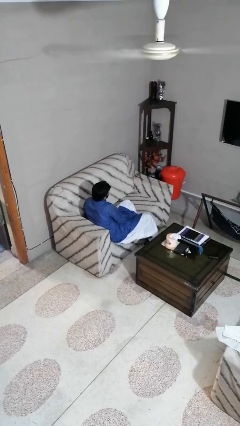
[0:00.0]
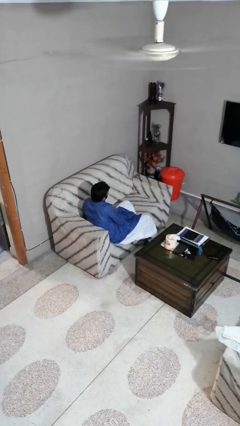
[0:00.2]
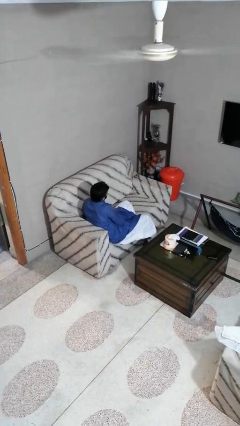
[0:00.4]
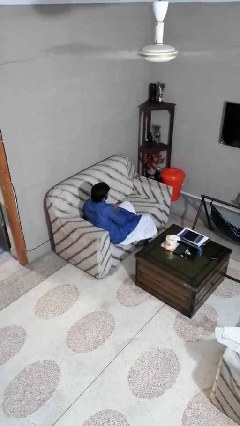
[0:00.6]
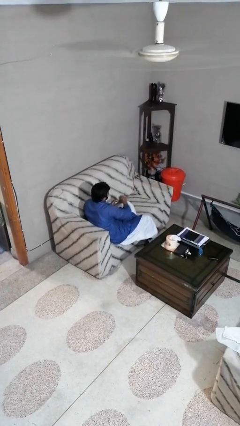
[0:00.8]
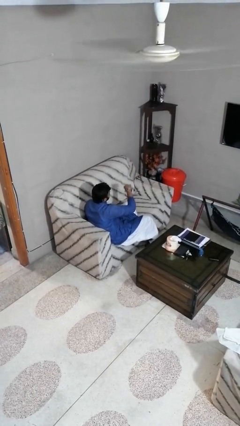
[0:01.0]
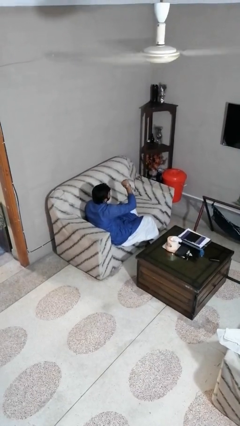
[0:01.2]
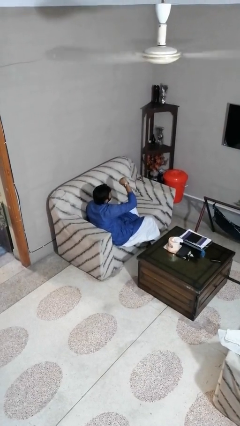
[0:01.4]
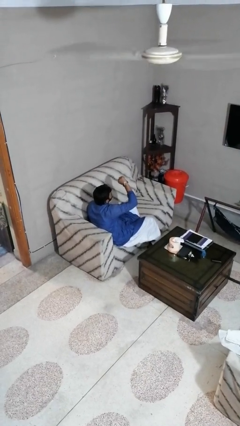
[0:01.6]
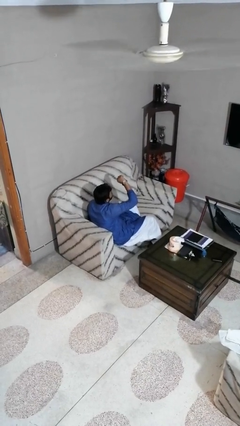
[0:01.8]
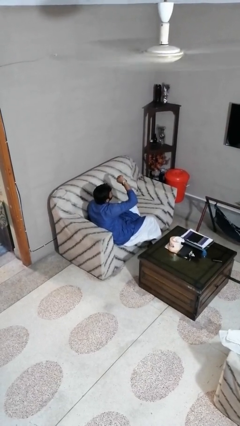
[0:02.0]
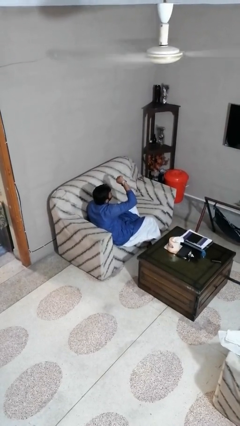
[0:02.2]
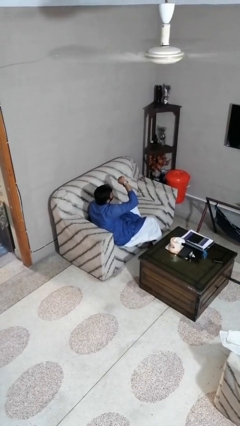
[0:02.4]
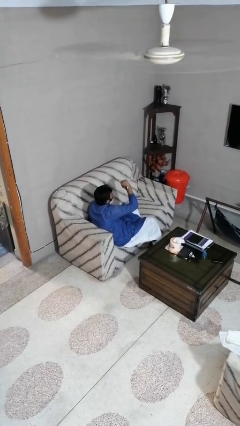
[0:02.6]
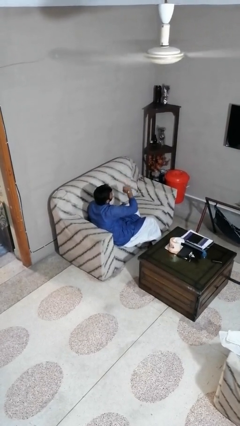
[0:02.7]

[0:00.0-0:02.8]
person looks at wristwatch

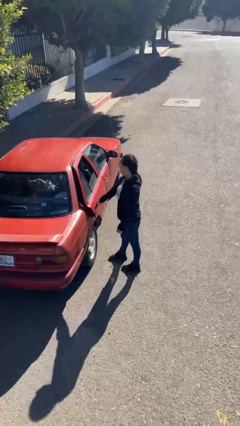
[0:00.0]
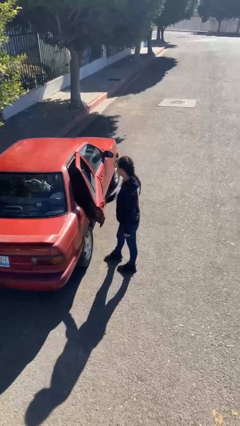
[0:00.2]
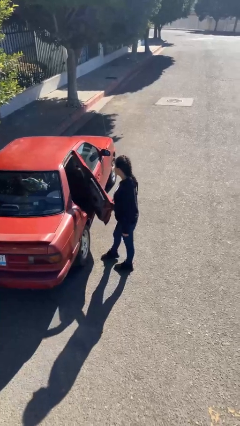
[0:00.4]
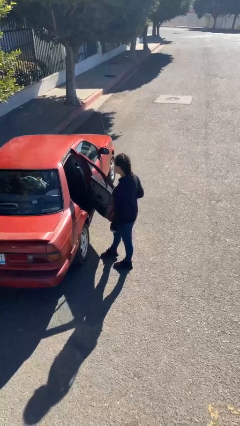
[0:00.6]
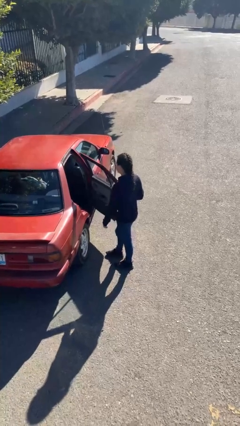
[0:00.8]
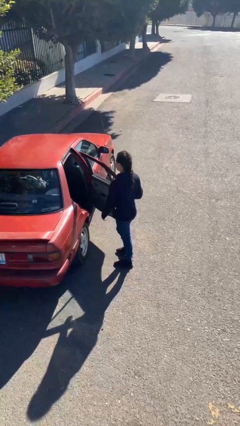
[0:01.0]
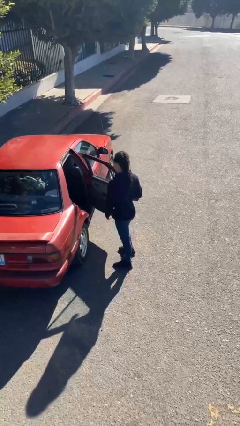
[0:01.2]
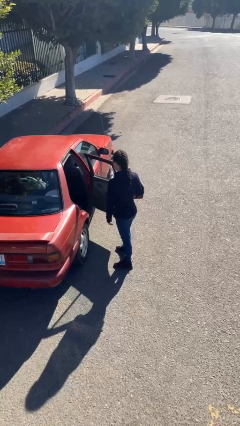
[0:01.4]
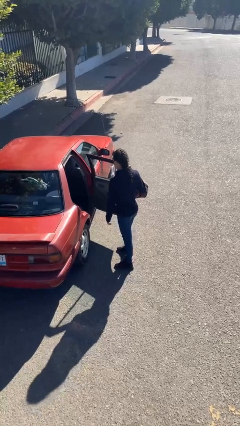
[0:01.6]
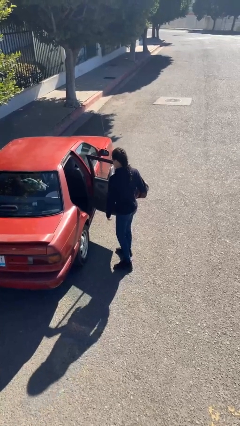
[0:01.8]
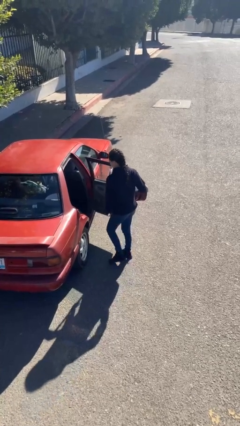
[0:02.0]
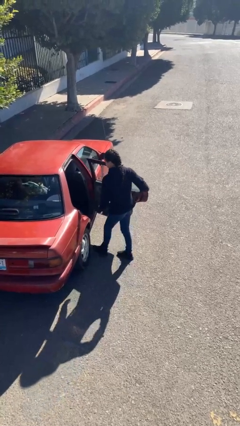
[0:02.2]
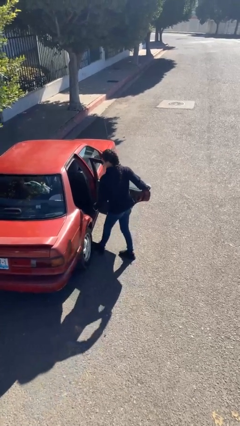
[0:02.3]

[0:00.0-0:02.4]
person opens car door

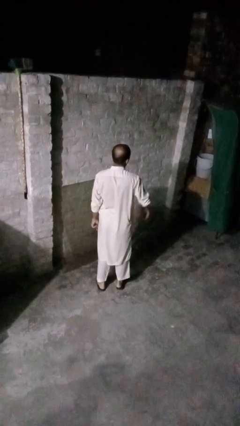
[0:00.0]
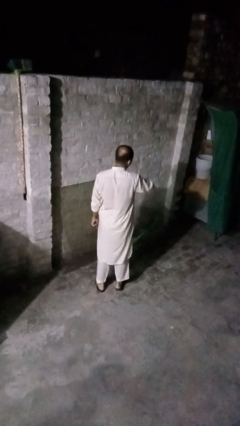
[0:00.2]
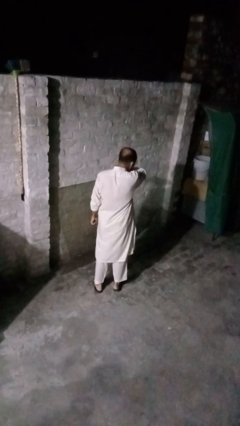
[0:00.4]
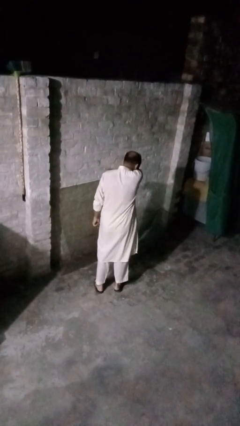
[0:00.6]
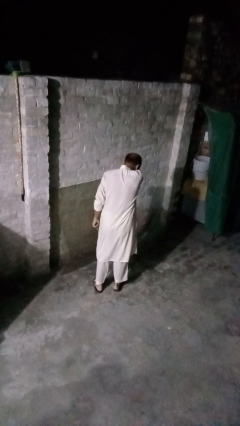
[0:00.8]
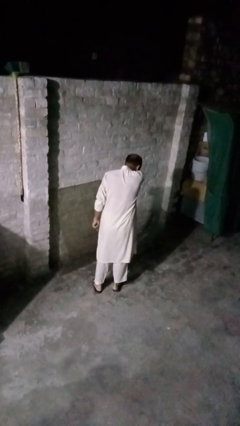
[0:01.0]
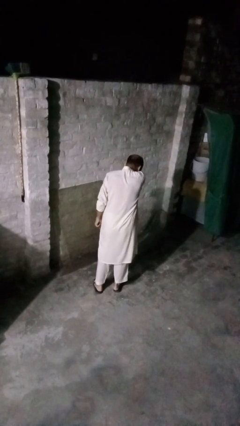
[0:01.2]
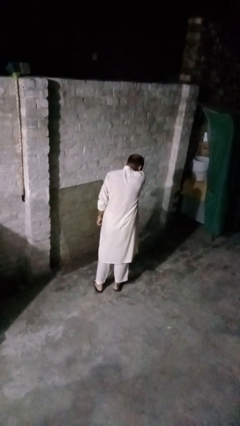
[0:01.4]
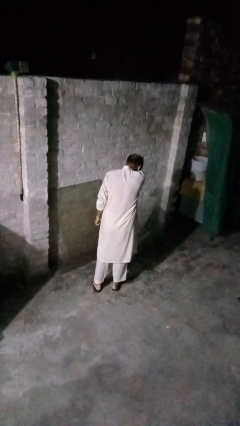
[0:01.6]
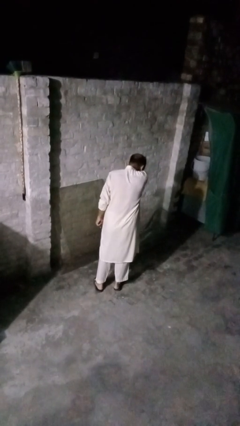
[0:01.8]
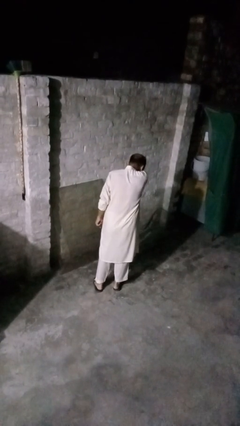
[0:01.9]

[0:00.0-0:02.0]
person sneezes into arm

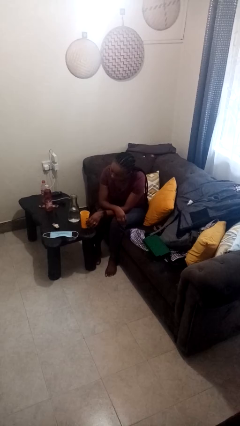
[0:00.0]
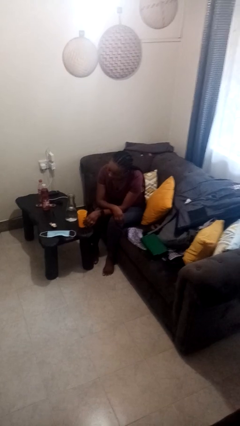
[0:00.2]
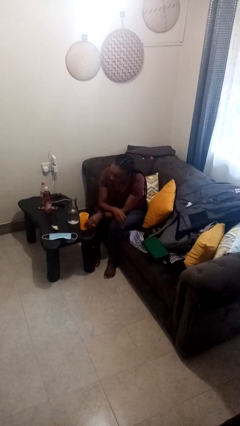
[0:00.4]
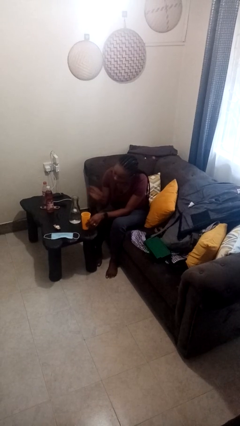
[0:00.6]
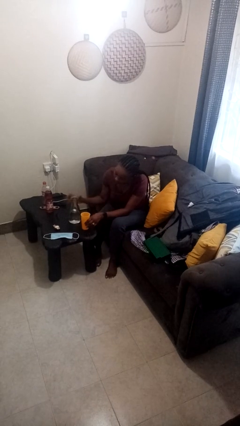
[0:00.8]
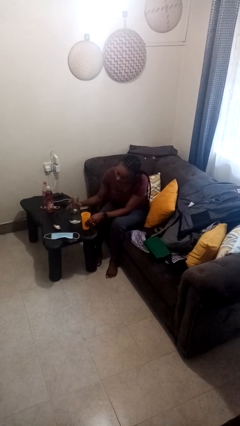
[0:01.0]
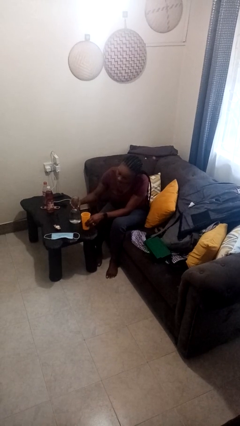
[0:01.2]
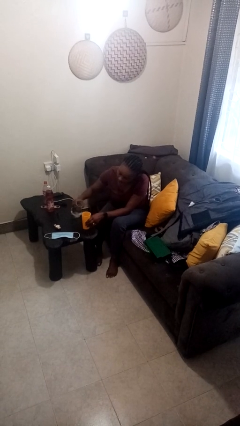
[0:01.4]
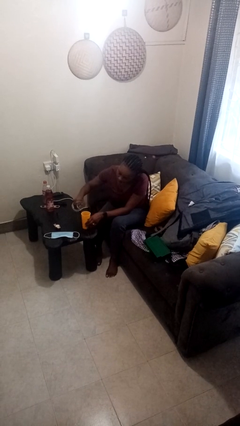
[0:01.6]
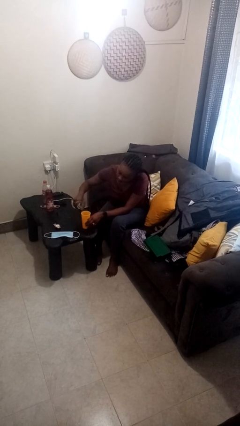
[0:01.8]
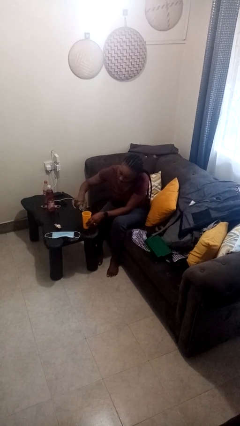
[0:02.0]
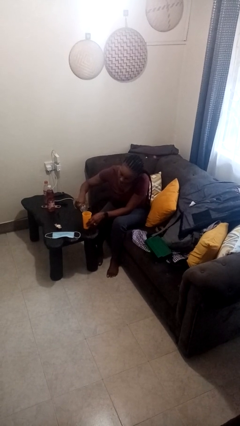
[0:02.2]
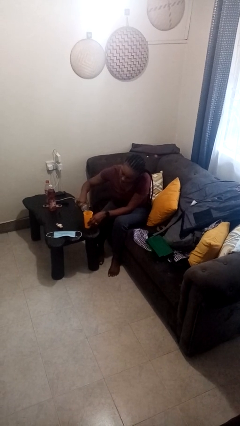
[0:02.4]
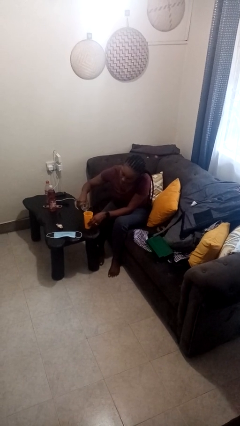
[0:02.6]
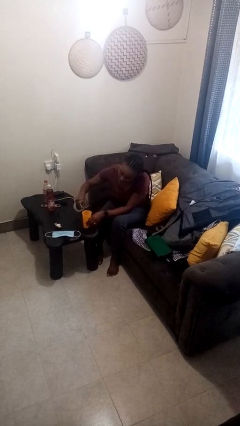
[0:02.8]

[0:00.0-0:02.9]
person pours liquid into cup

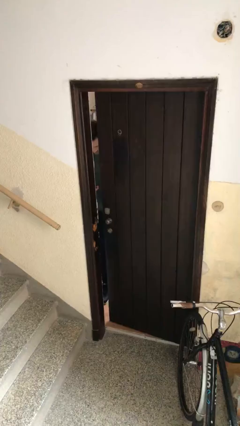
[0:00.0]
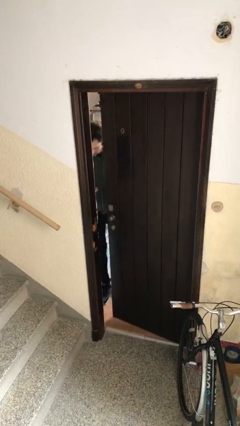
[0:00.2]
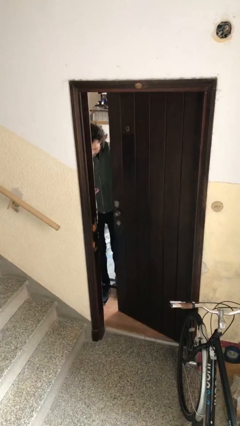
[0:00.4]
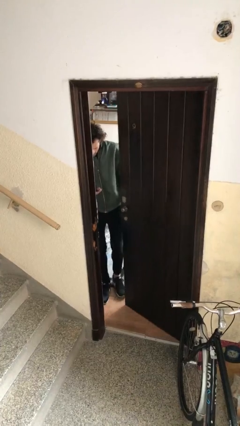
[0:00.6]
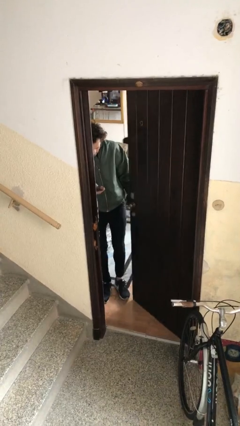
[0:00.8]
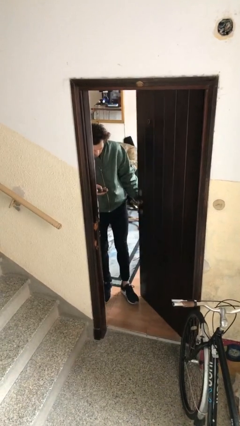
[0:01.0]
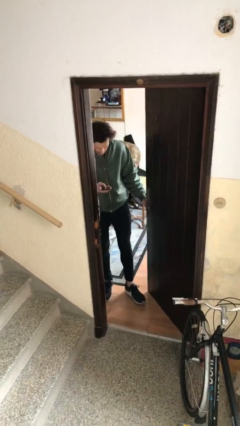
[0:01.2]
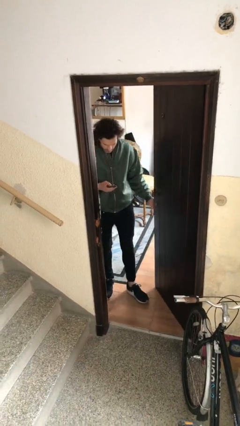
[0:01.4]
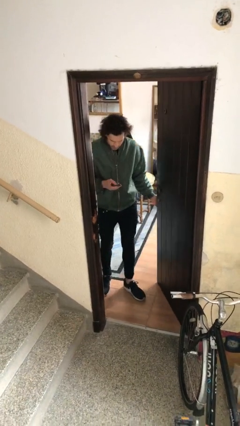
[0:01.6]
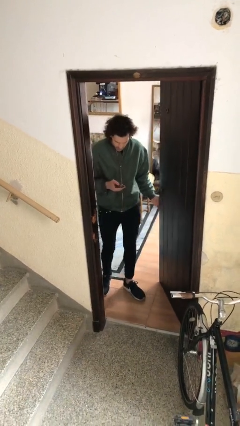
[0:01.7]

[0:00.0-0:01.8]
person opens facility door

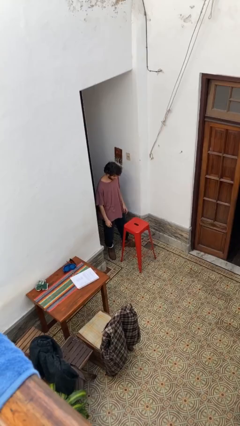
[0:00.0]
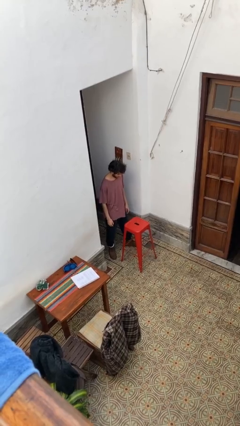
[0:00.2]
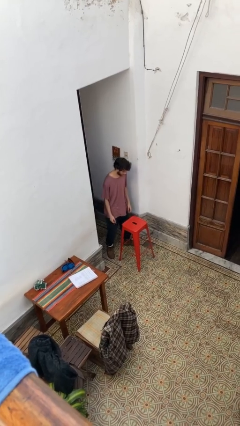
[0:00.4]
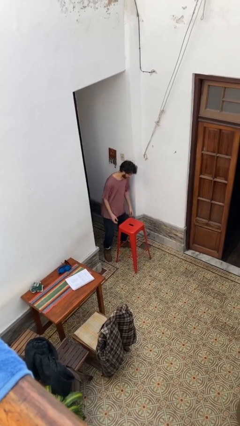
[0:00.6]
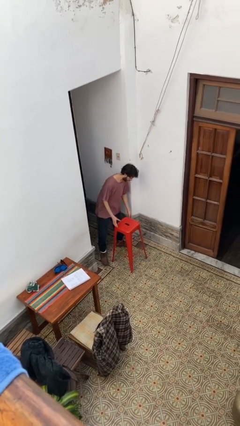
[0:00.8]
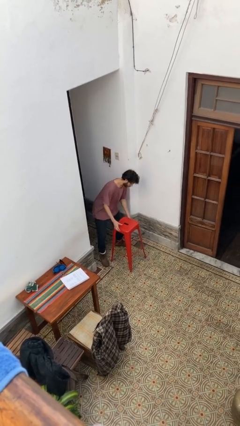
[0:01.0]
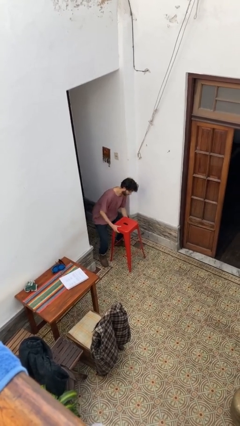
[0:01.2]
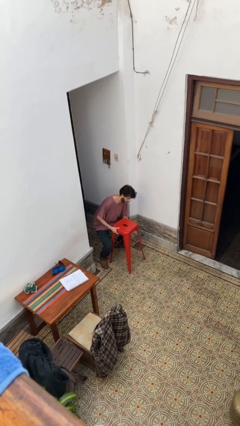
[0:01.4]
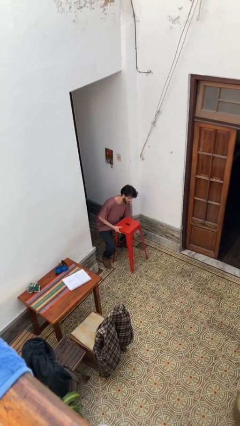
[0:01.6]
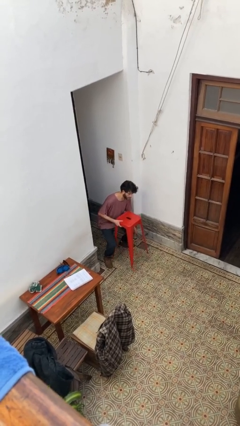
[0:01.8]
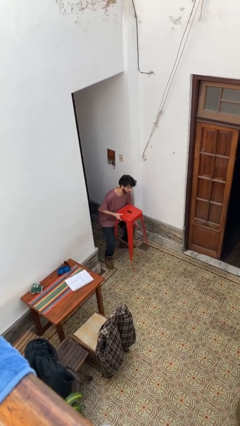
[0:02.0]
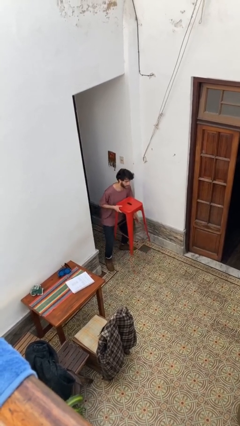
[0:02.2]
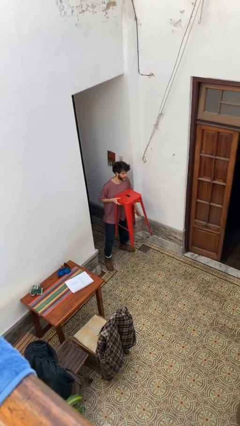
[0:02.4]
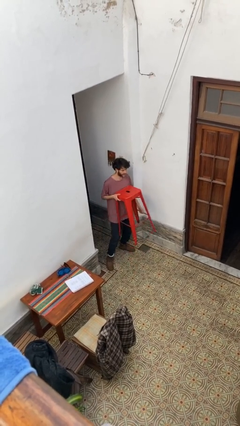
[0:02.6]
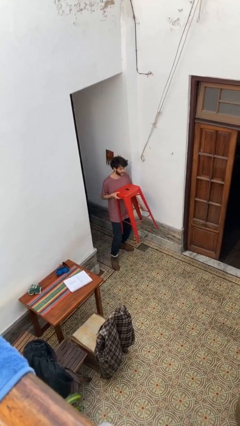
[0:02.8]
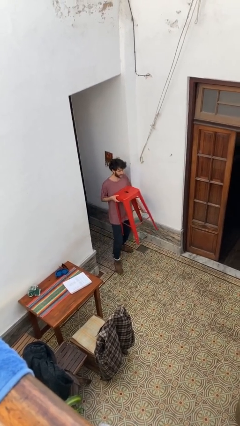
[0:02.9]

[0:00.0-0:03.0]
person picks up object from floor

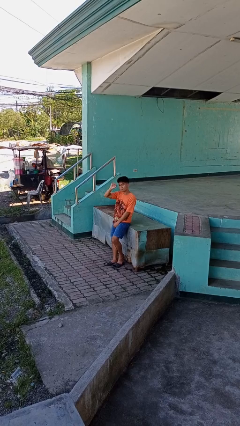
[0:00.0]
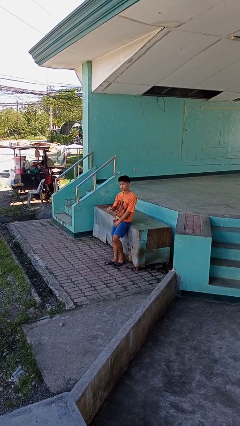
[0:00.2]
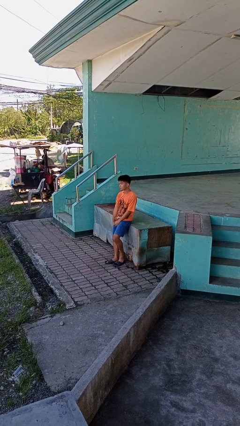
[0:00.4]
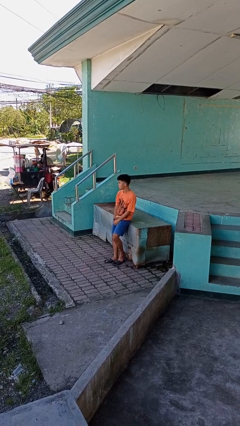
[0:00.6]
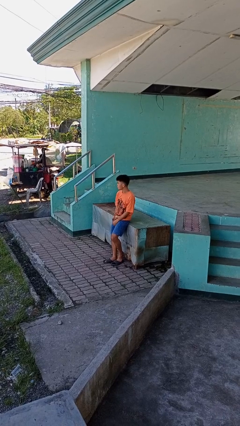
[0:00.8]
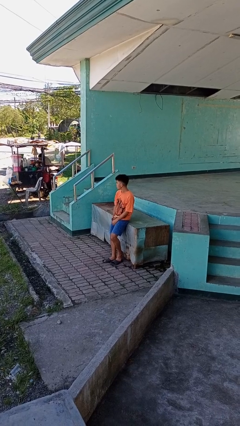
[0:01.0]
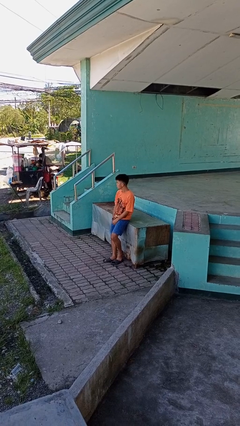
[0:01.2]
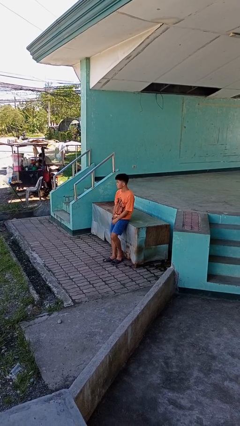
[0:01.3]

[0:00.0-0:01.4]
person gestures lower hand

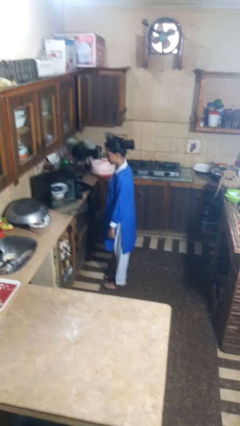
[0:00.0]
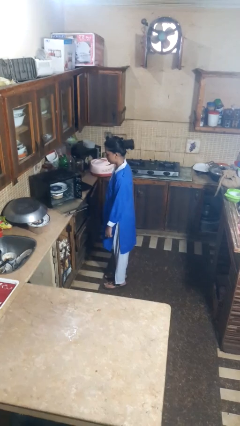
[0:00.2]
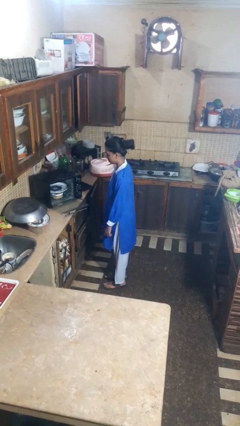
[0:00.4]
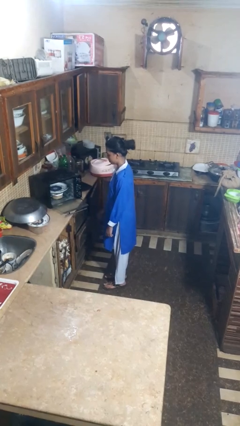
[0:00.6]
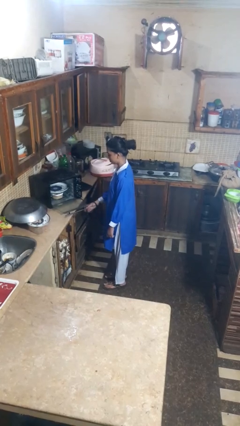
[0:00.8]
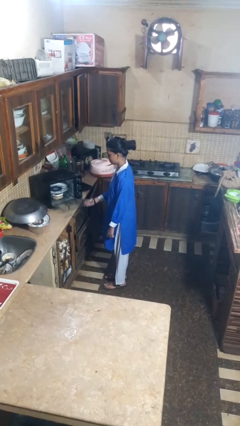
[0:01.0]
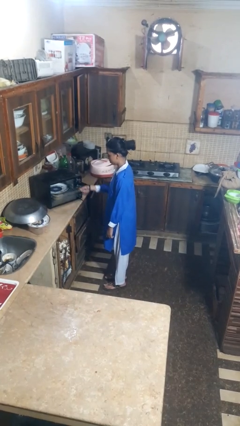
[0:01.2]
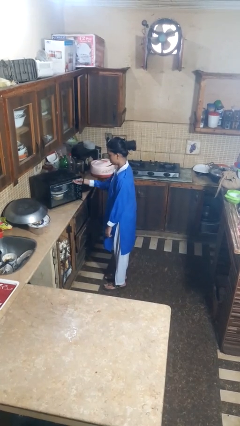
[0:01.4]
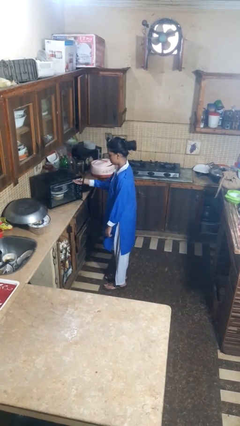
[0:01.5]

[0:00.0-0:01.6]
person closes dishwasher
